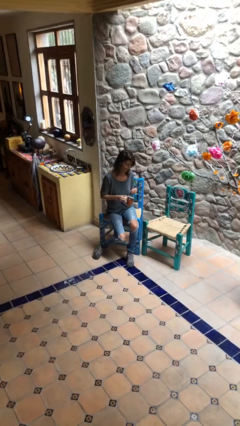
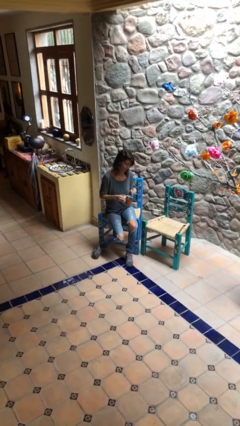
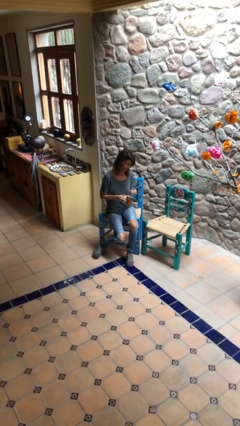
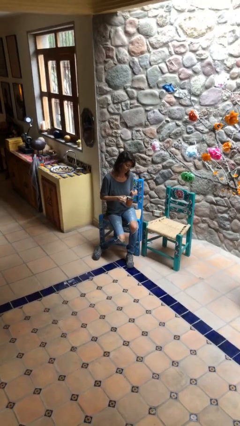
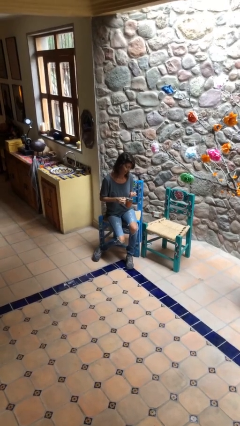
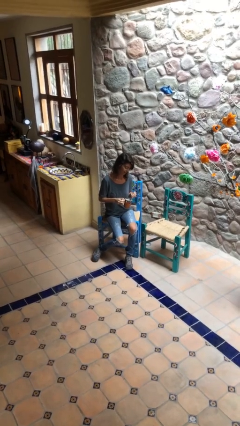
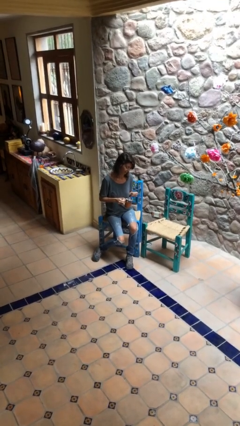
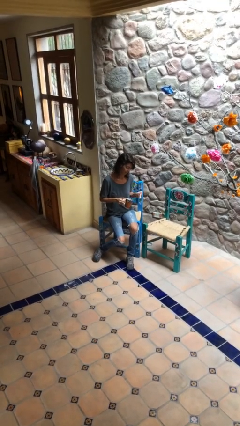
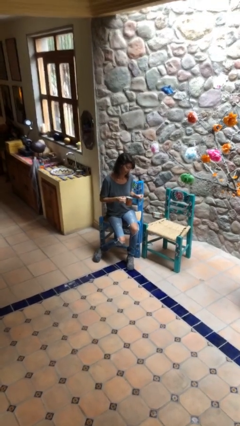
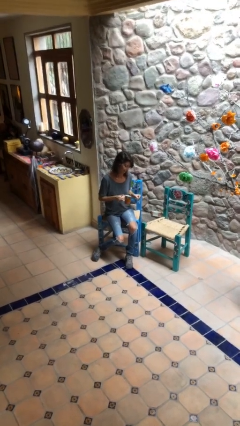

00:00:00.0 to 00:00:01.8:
person stirs mug

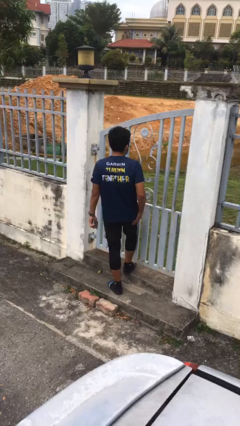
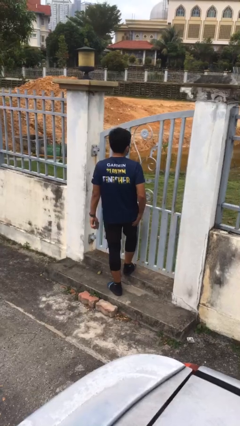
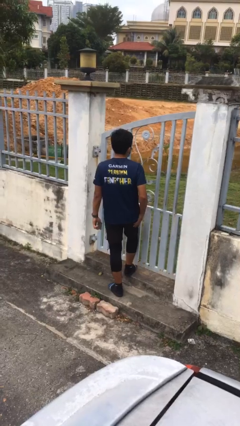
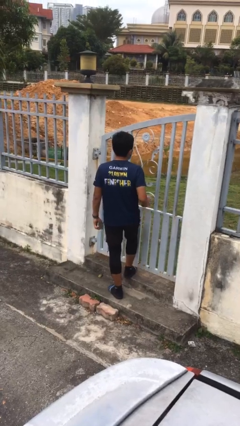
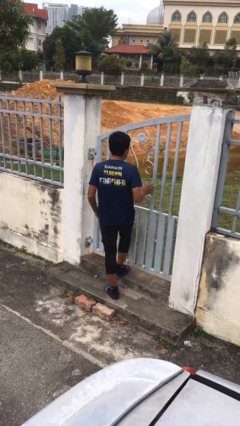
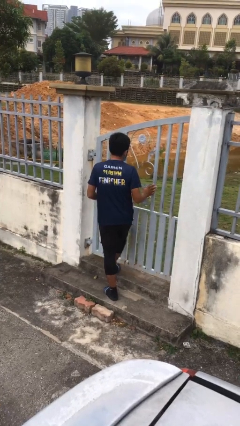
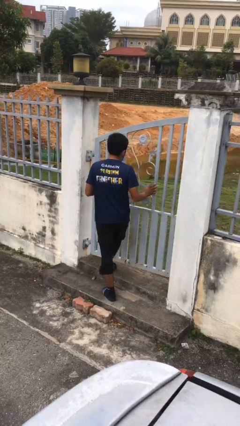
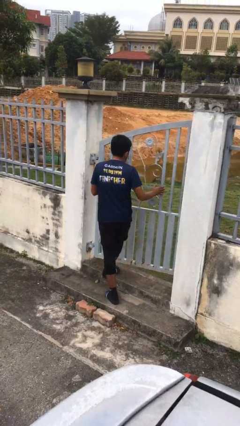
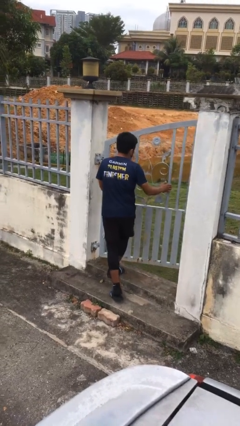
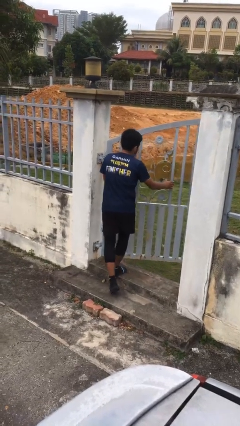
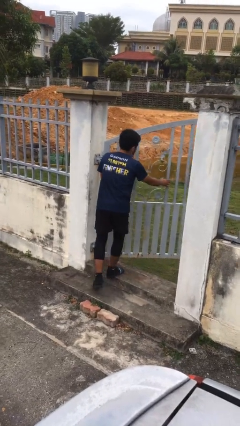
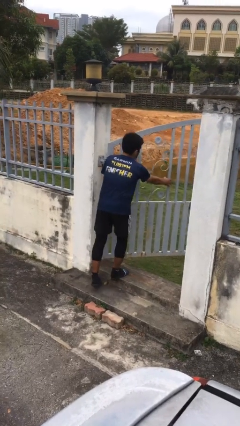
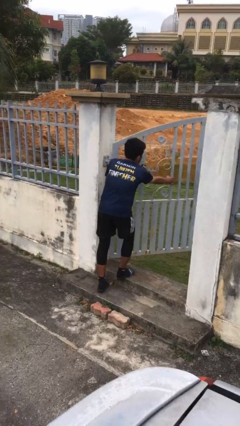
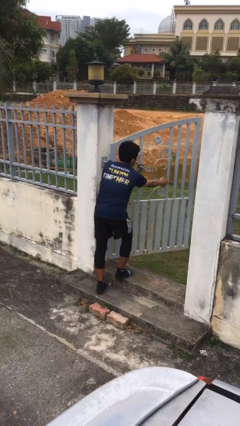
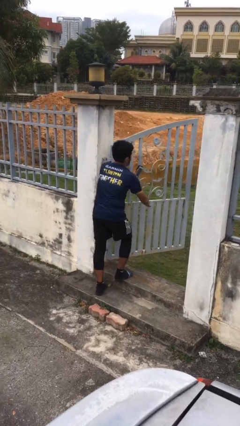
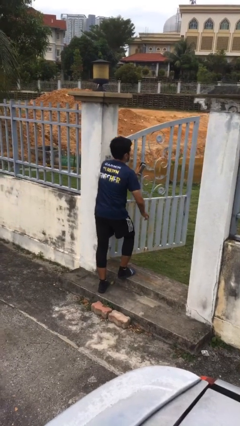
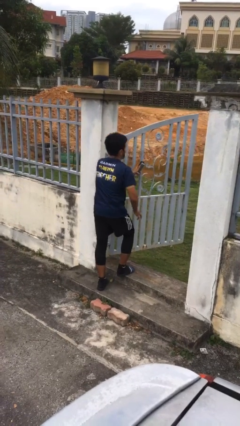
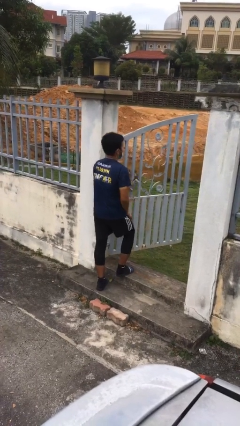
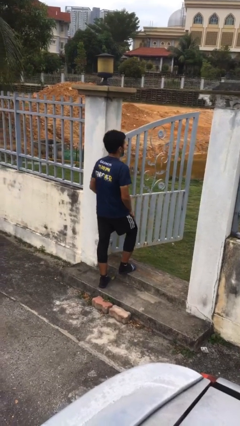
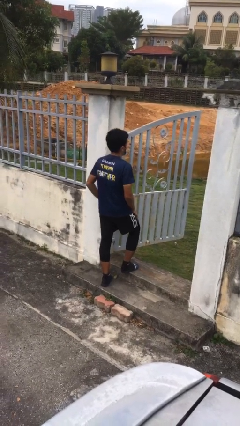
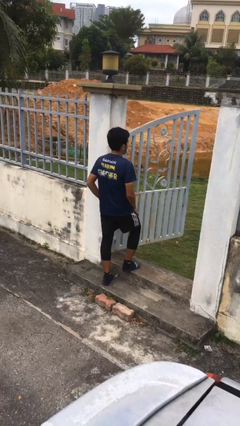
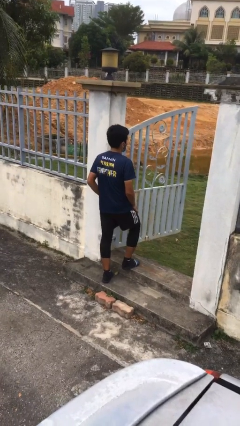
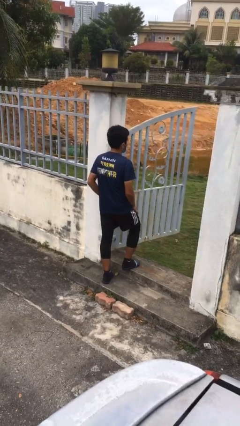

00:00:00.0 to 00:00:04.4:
person opens facility door

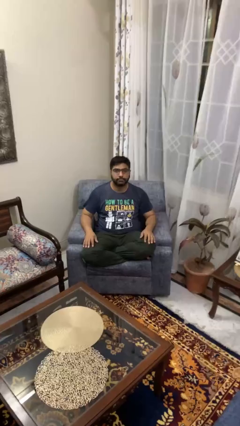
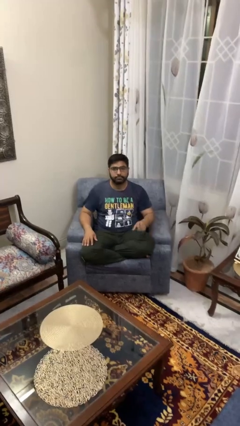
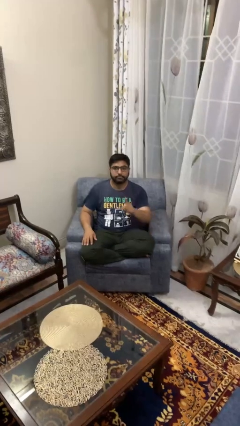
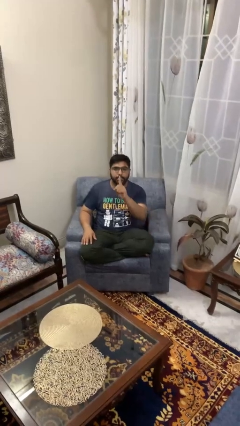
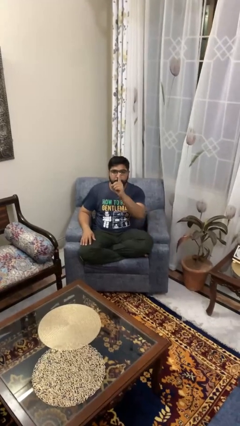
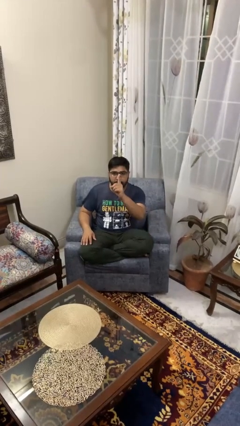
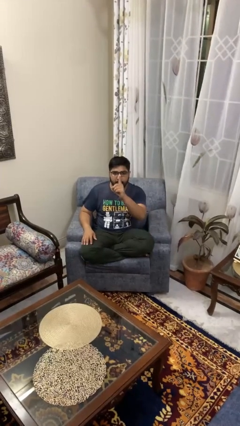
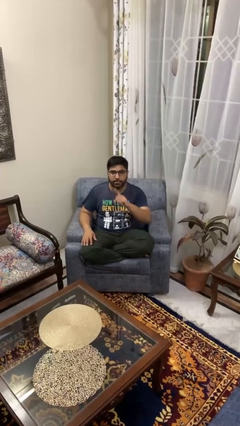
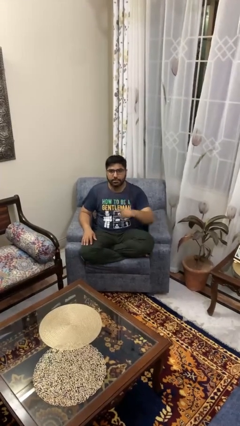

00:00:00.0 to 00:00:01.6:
person gestures number one

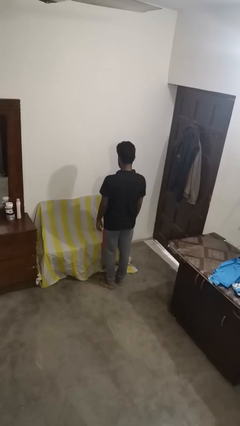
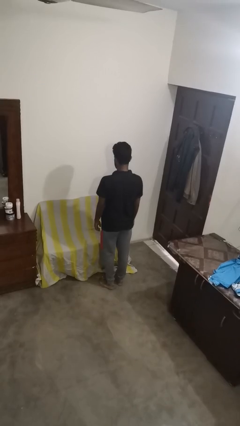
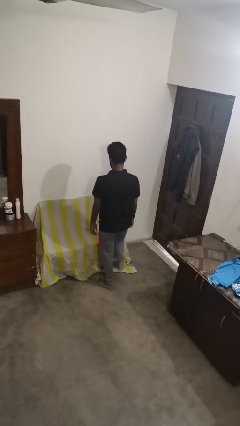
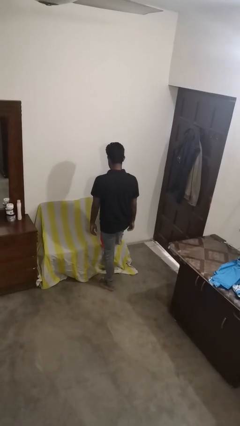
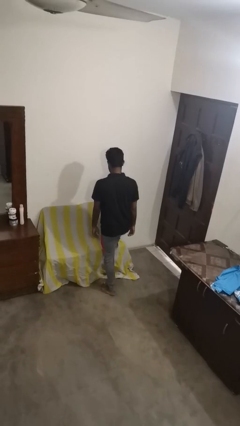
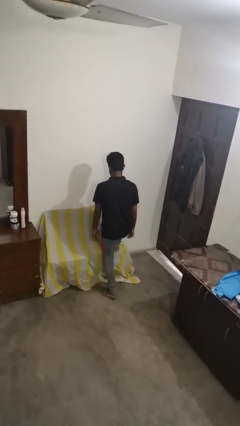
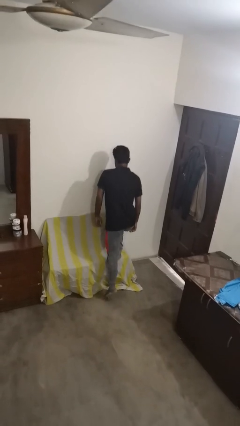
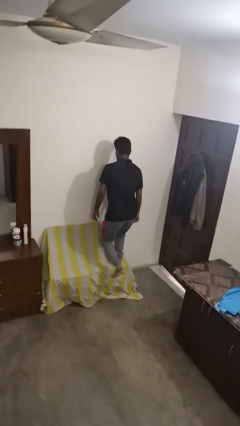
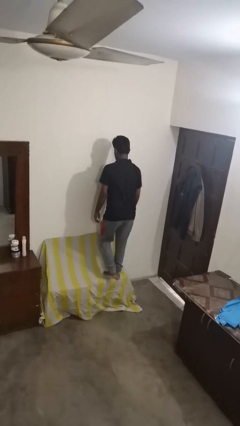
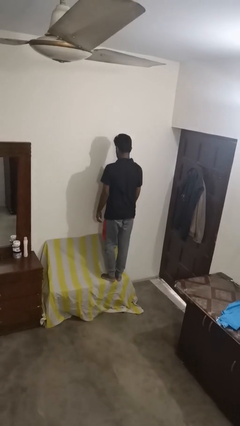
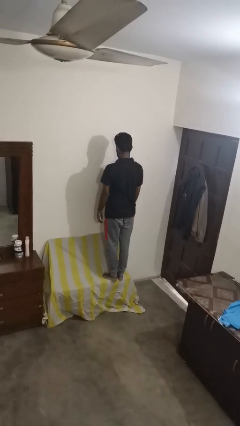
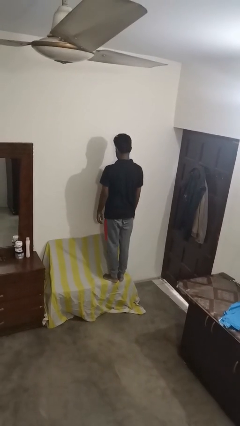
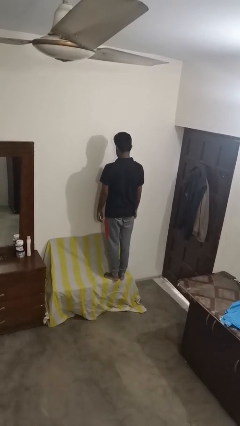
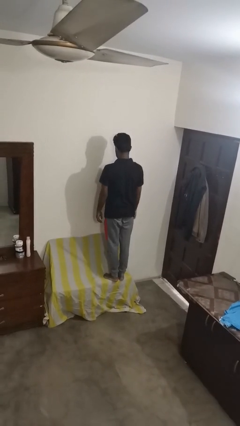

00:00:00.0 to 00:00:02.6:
person climbs on couch

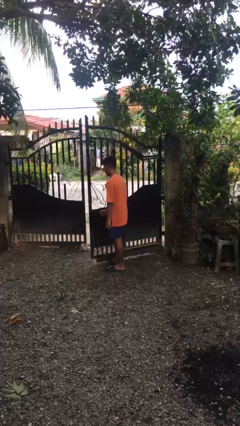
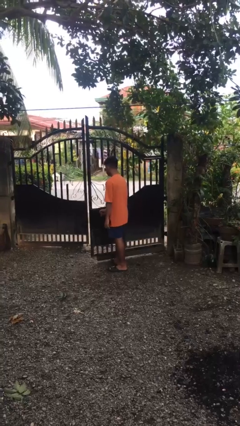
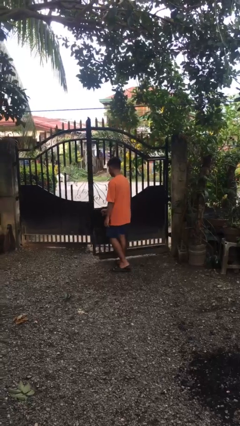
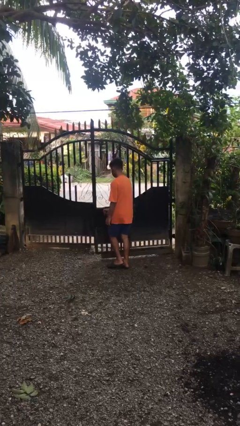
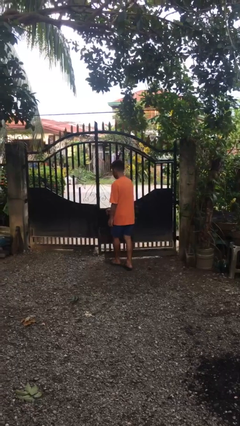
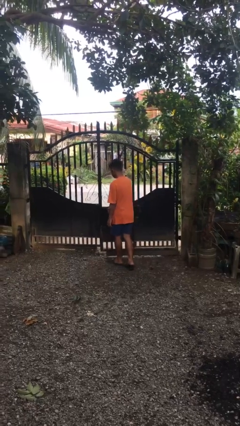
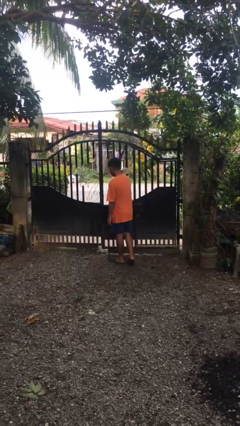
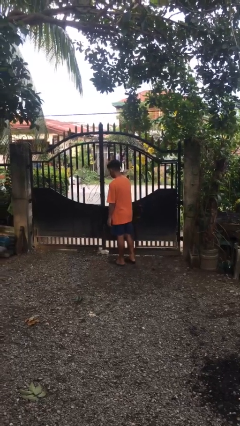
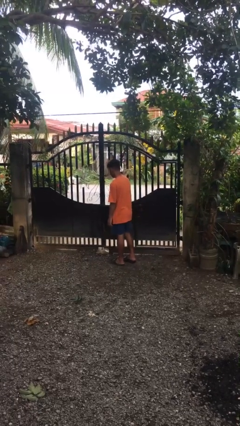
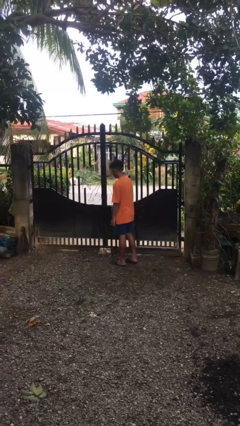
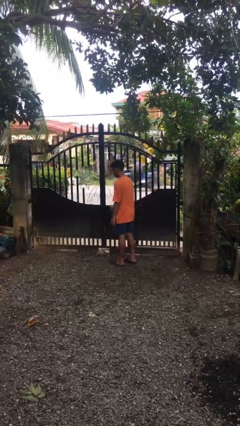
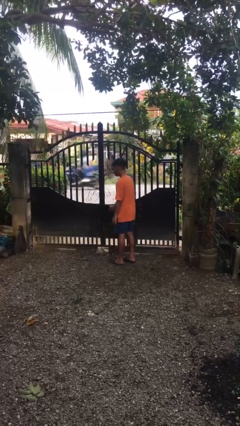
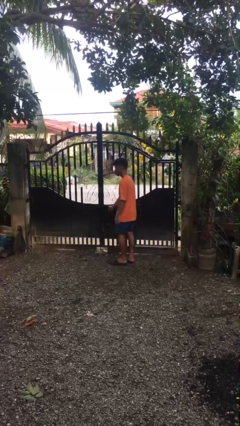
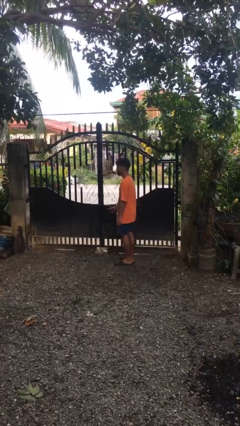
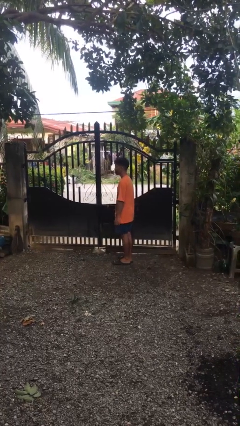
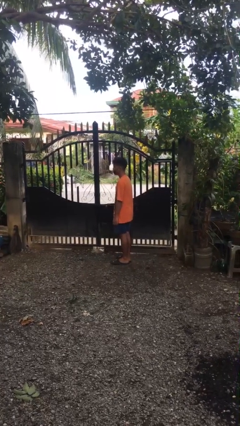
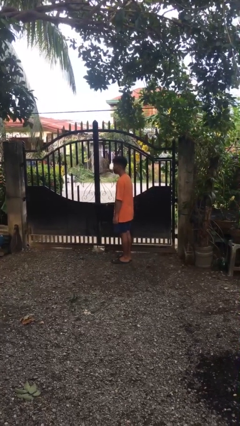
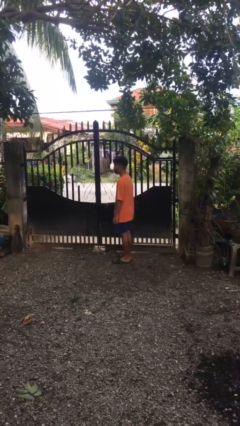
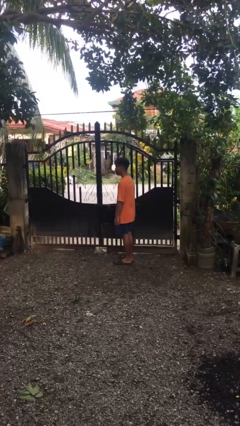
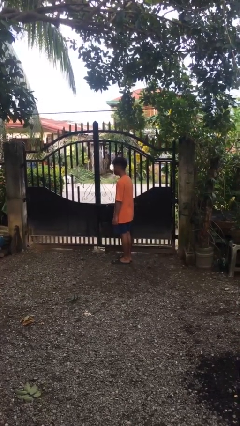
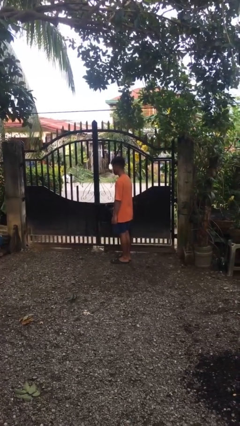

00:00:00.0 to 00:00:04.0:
person closes gate

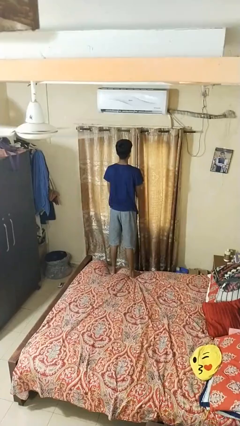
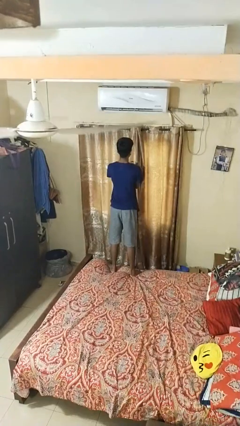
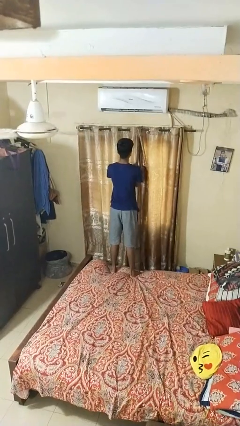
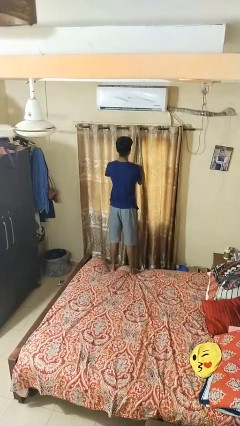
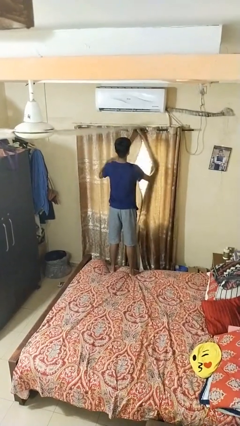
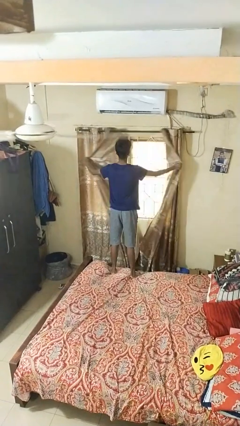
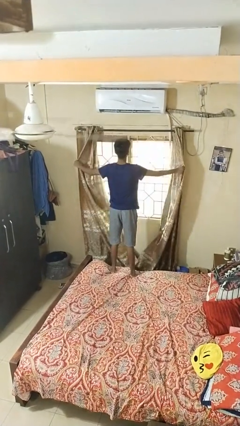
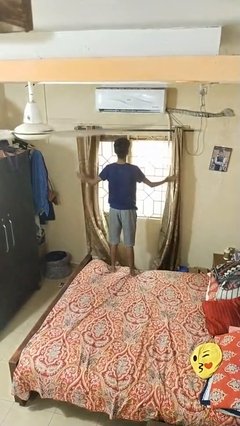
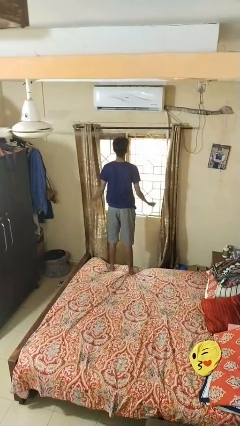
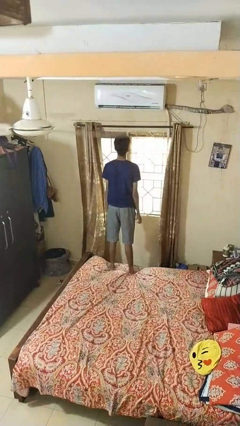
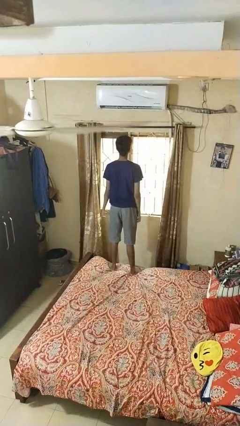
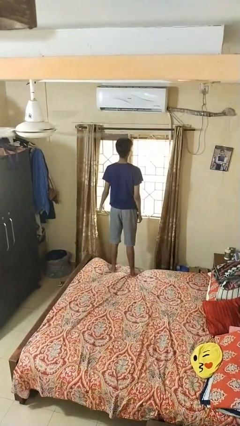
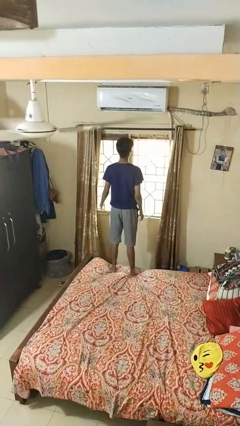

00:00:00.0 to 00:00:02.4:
person opens curtains

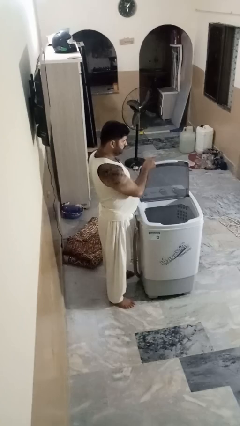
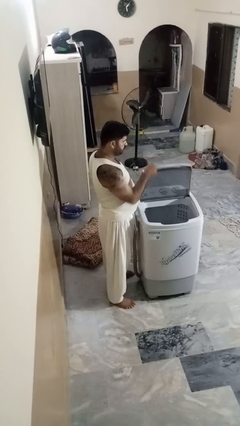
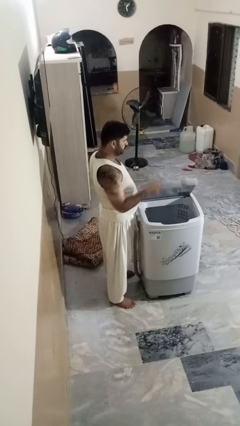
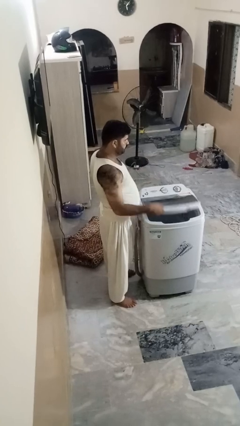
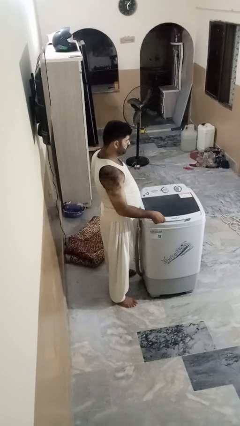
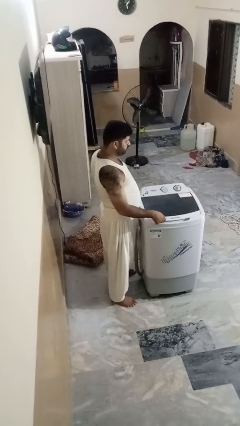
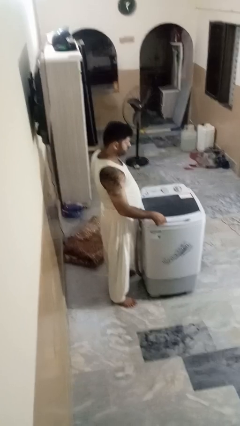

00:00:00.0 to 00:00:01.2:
person closes clothes washer
